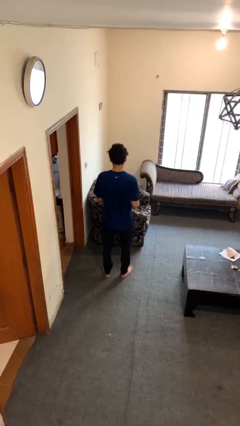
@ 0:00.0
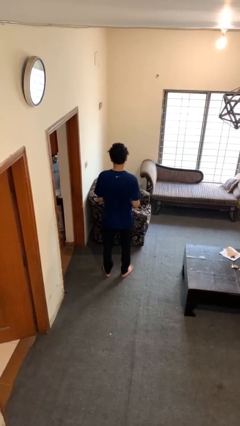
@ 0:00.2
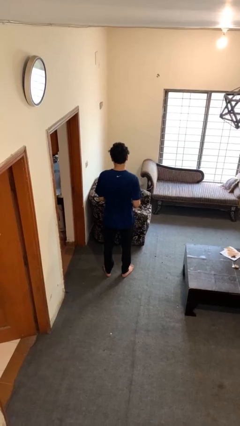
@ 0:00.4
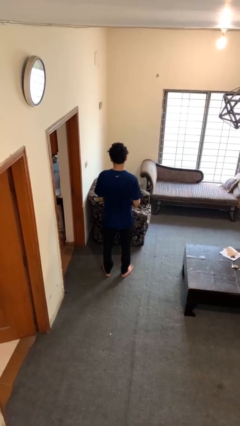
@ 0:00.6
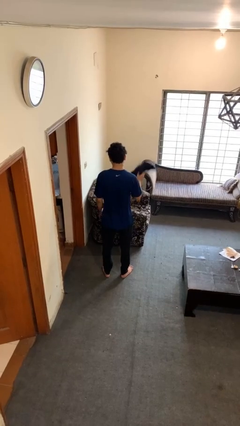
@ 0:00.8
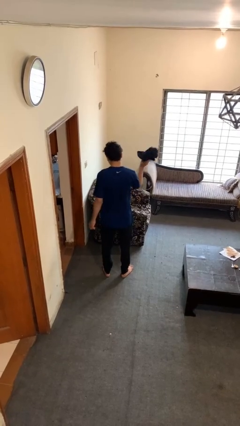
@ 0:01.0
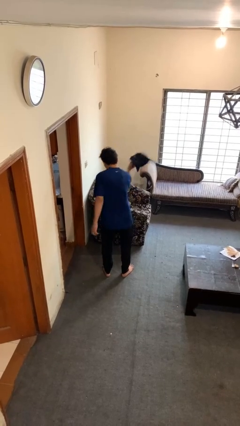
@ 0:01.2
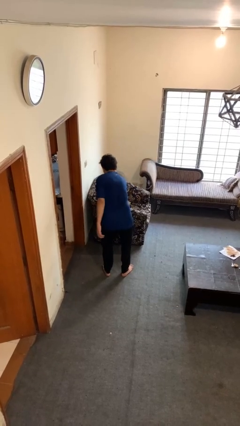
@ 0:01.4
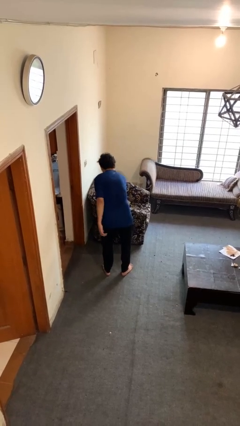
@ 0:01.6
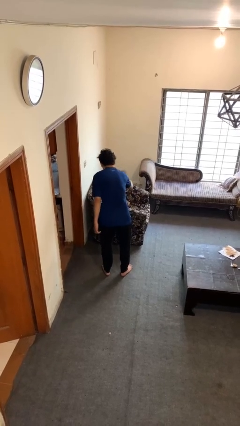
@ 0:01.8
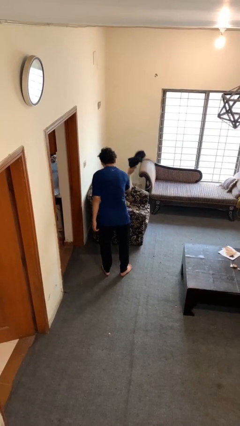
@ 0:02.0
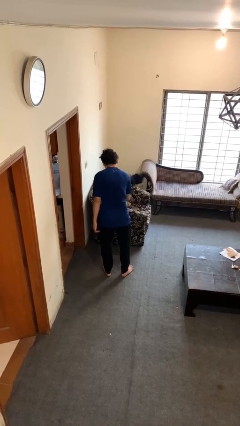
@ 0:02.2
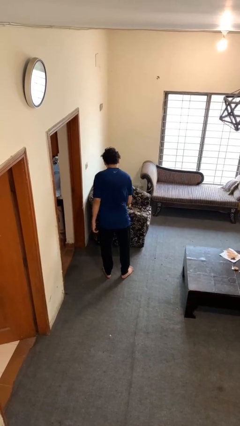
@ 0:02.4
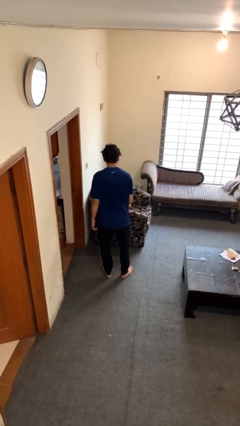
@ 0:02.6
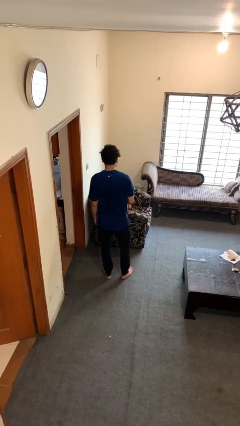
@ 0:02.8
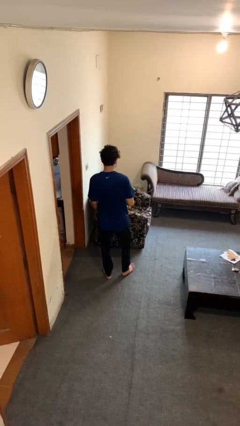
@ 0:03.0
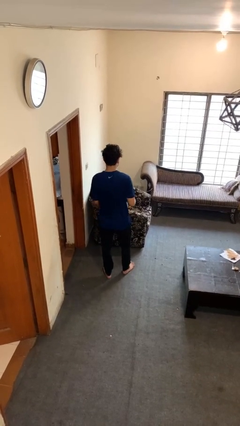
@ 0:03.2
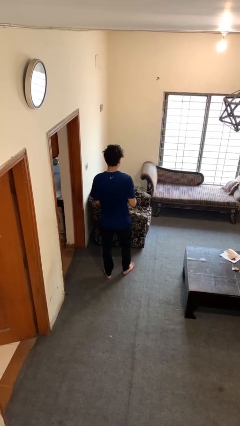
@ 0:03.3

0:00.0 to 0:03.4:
person dusts furniture

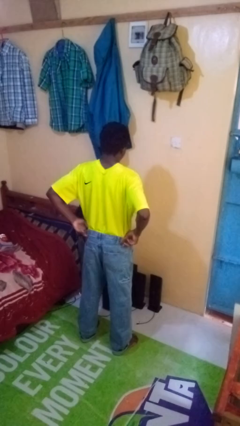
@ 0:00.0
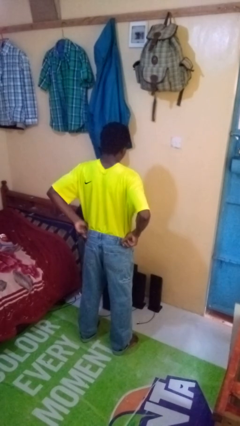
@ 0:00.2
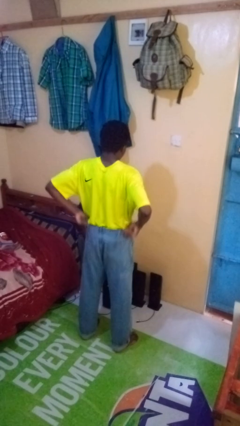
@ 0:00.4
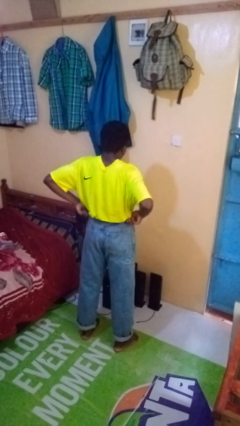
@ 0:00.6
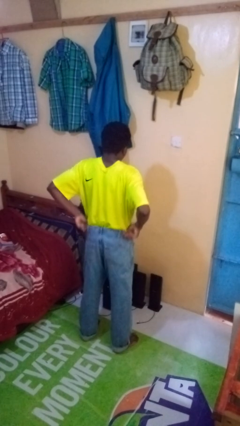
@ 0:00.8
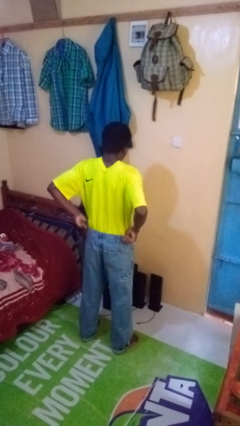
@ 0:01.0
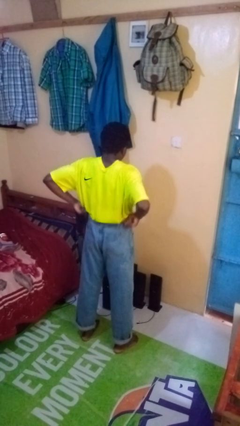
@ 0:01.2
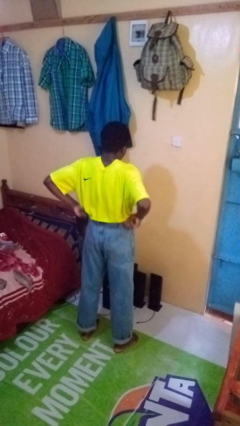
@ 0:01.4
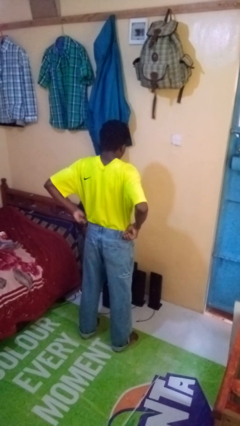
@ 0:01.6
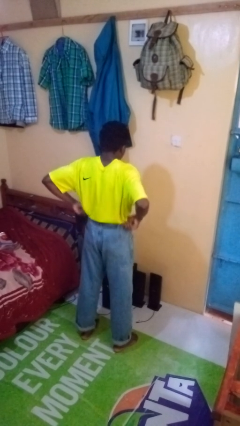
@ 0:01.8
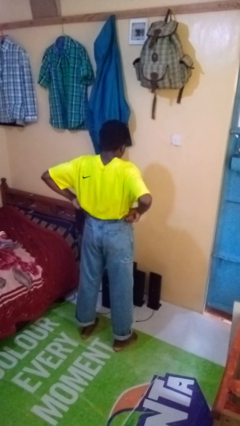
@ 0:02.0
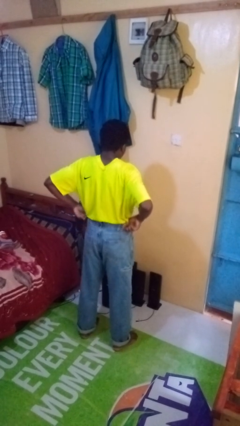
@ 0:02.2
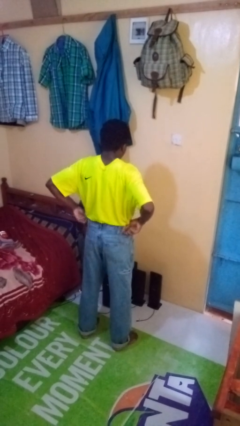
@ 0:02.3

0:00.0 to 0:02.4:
person hikes up pants

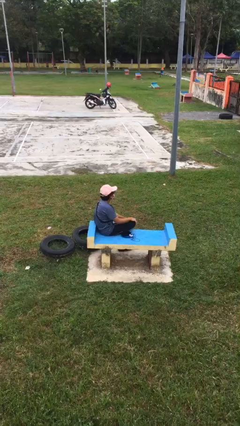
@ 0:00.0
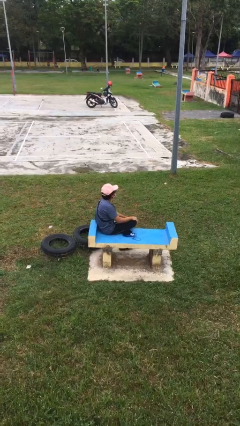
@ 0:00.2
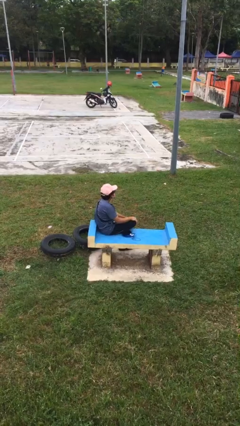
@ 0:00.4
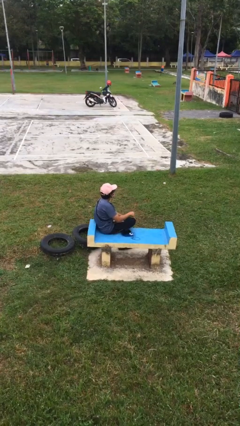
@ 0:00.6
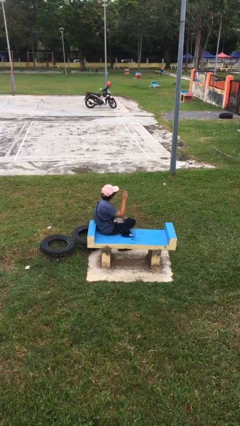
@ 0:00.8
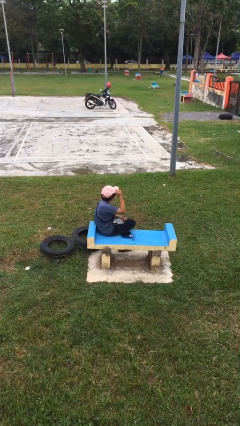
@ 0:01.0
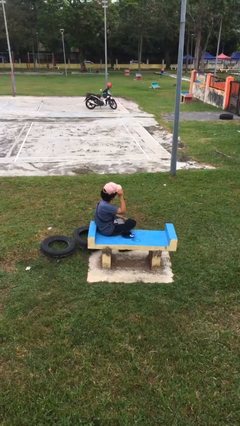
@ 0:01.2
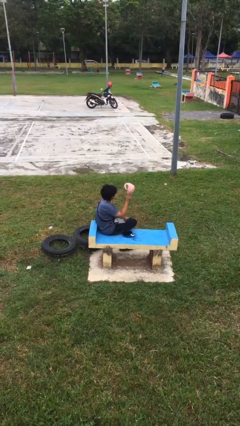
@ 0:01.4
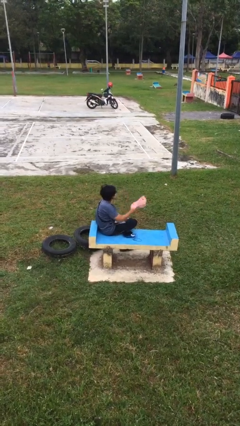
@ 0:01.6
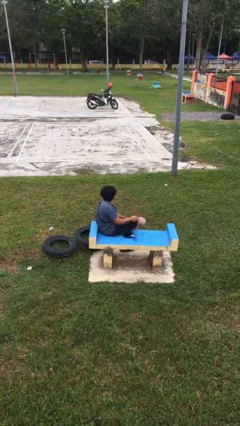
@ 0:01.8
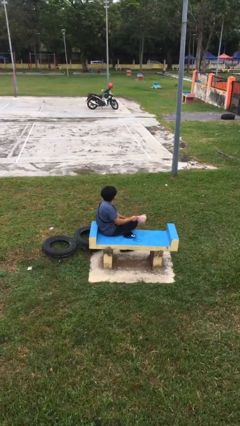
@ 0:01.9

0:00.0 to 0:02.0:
person takes off hat

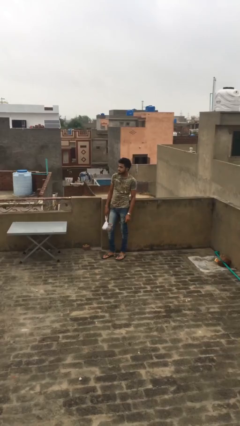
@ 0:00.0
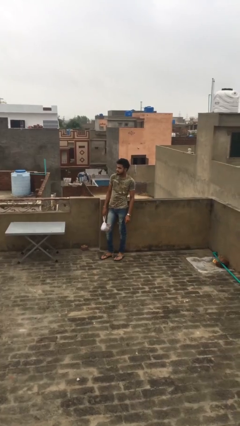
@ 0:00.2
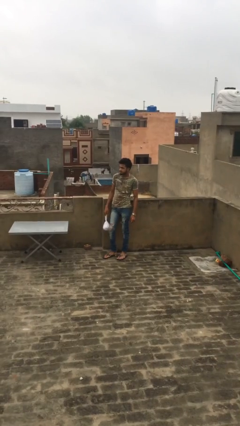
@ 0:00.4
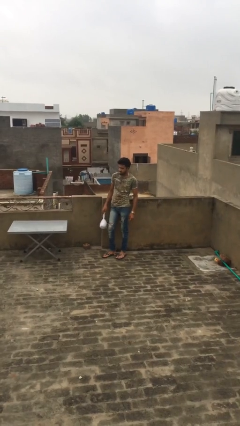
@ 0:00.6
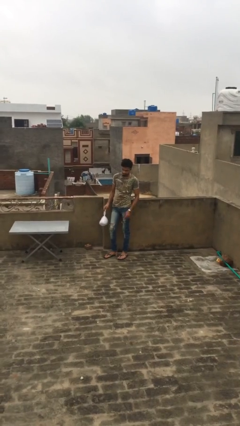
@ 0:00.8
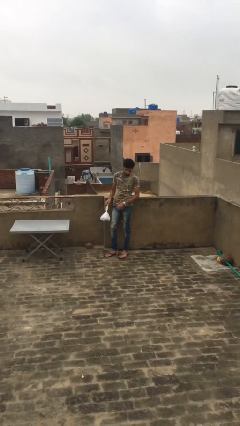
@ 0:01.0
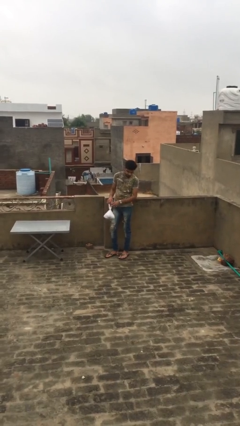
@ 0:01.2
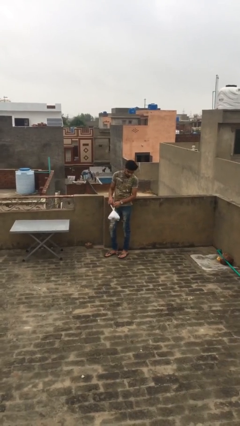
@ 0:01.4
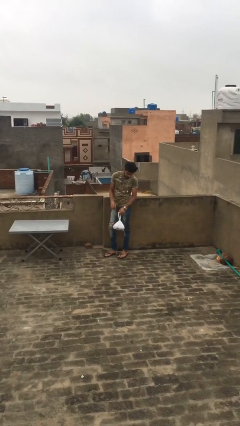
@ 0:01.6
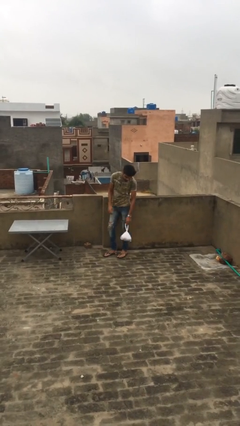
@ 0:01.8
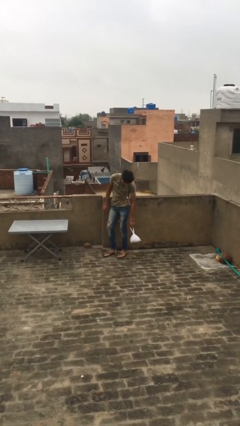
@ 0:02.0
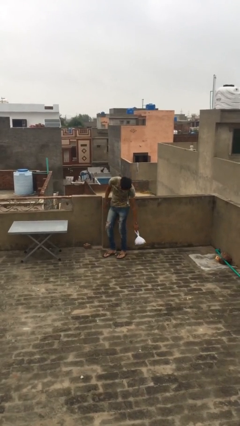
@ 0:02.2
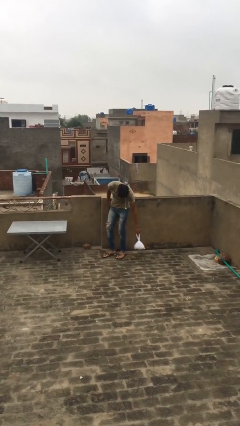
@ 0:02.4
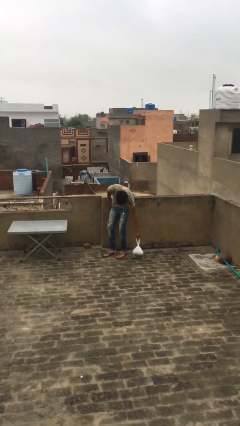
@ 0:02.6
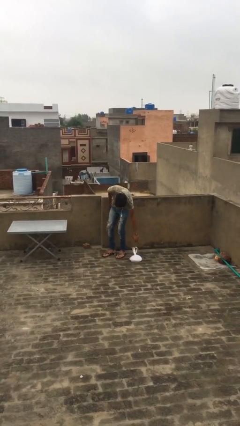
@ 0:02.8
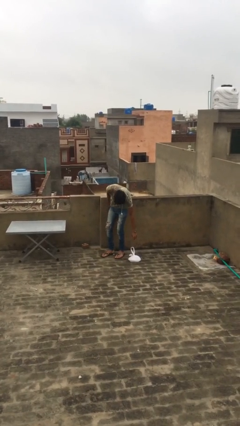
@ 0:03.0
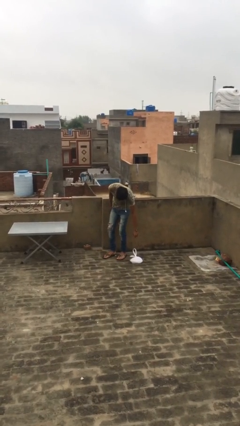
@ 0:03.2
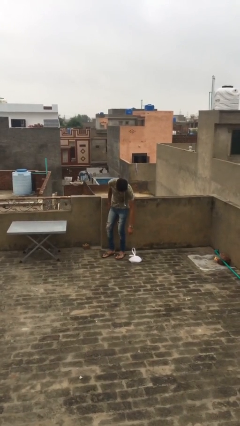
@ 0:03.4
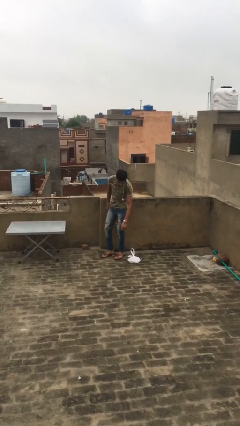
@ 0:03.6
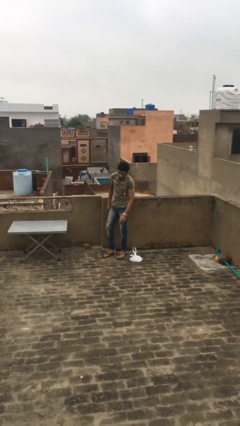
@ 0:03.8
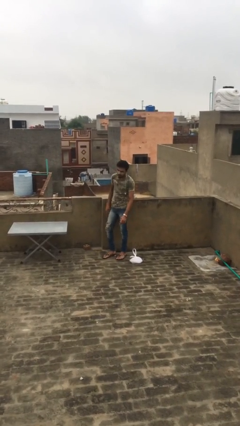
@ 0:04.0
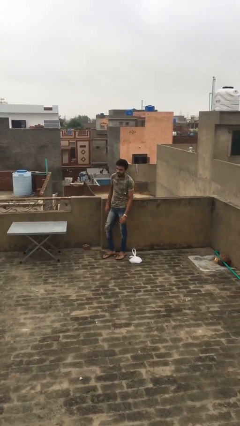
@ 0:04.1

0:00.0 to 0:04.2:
person puts down object on floor

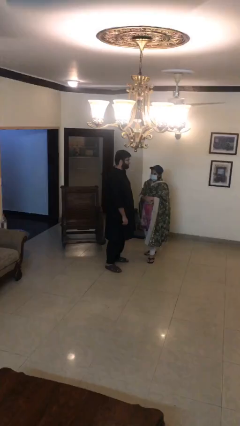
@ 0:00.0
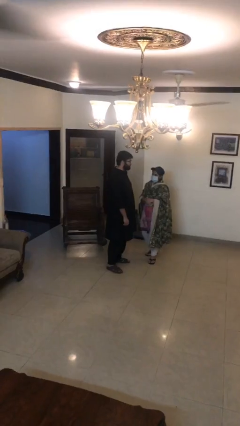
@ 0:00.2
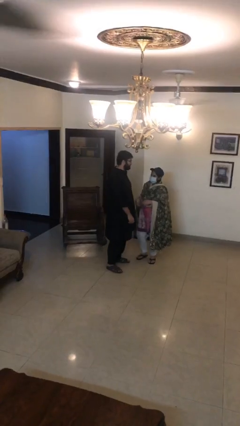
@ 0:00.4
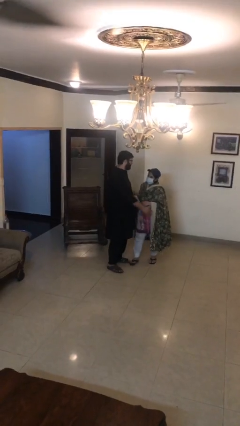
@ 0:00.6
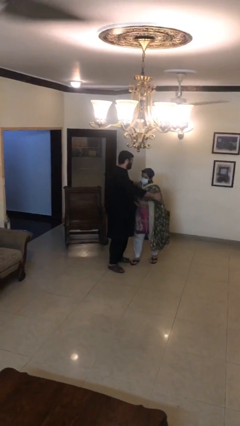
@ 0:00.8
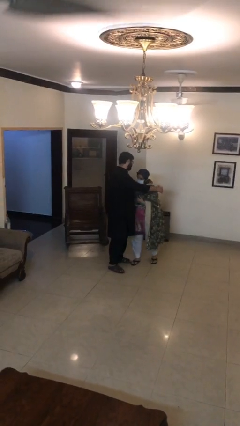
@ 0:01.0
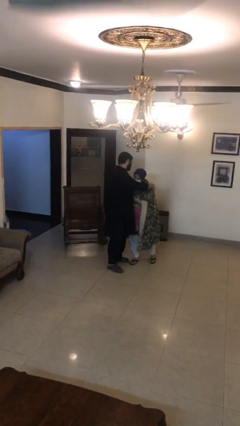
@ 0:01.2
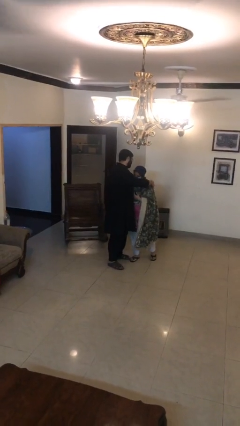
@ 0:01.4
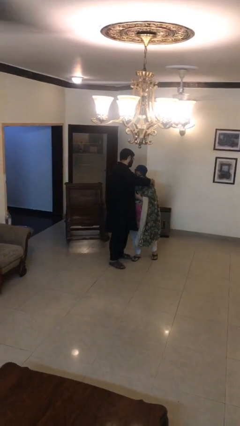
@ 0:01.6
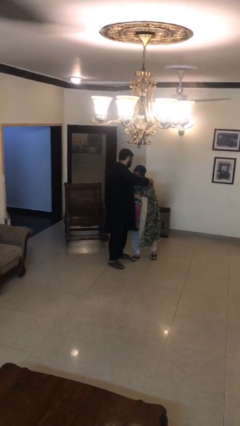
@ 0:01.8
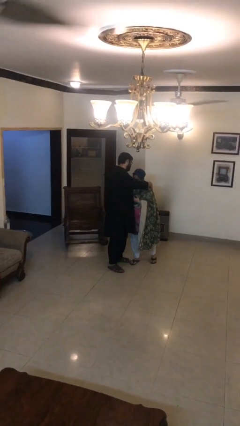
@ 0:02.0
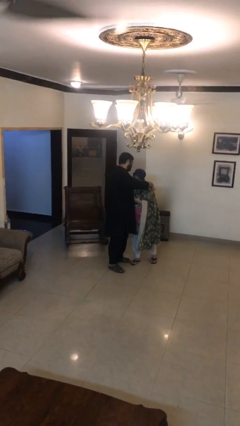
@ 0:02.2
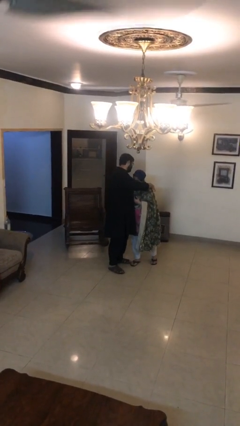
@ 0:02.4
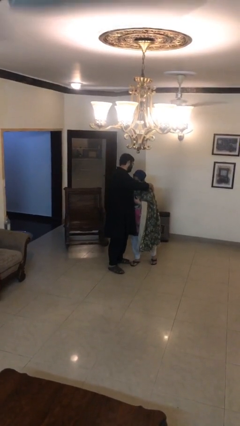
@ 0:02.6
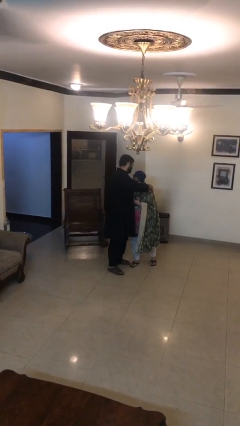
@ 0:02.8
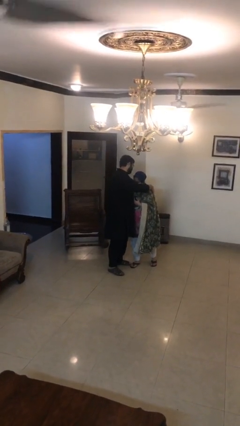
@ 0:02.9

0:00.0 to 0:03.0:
person embraces person

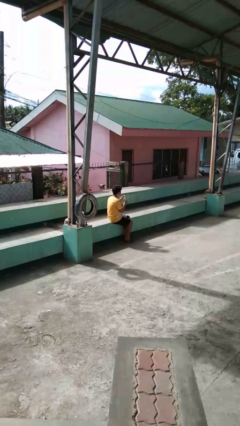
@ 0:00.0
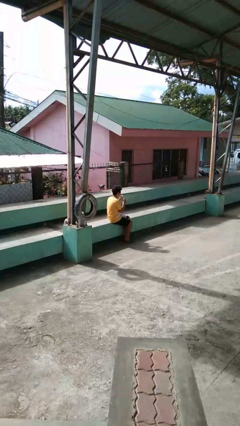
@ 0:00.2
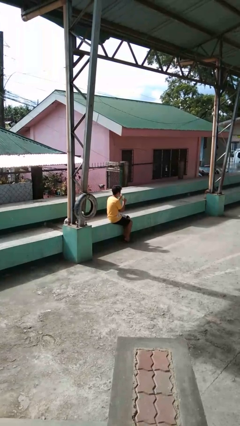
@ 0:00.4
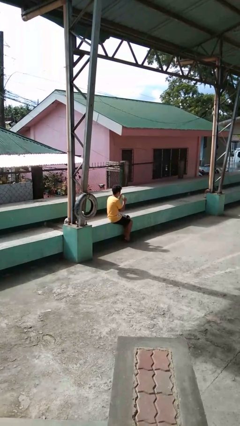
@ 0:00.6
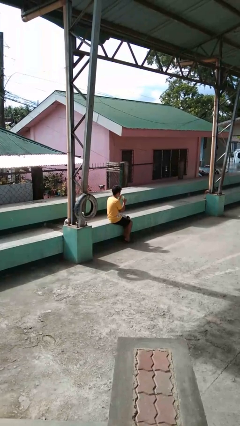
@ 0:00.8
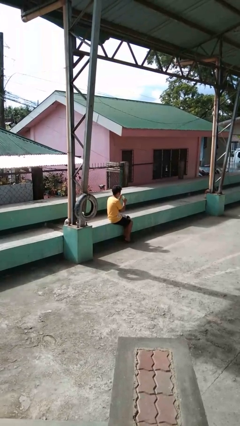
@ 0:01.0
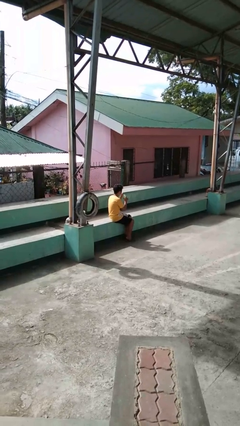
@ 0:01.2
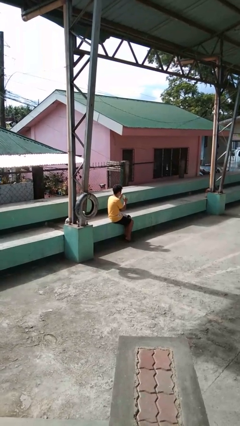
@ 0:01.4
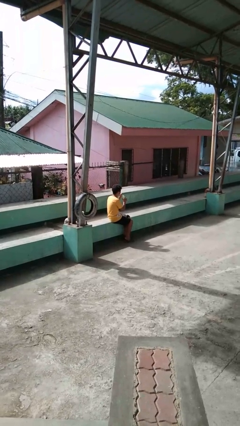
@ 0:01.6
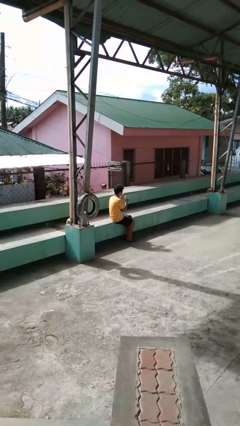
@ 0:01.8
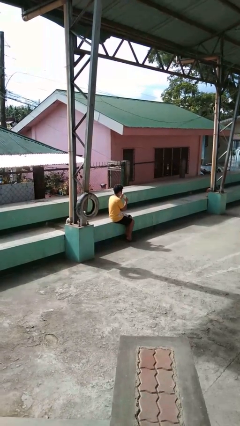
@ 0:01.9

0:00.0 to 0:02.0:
person drinks from straw

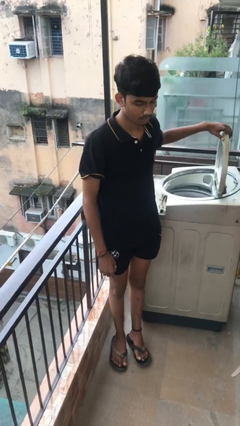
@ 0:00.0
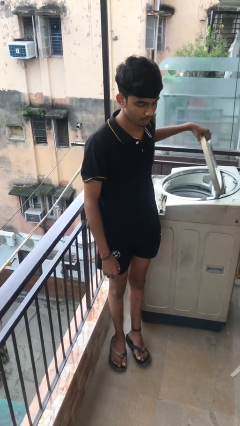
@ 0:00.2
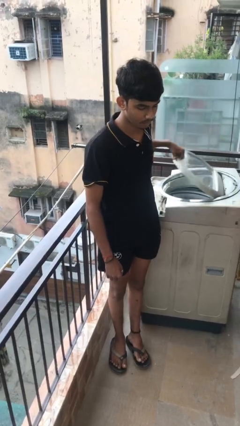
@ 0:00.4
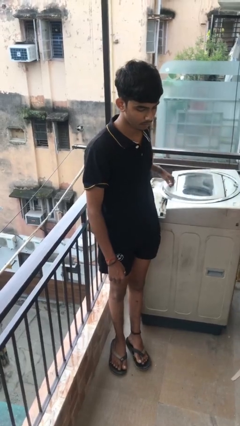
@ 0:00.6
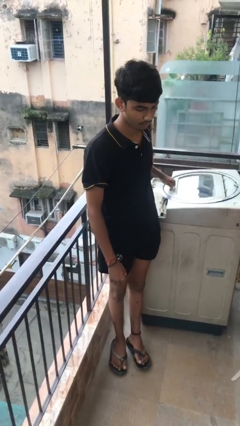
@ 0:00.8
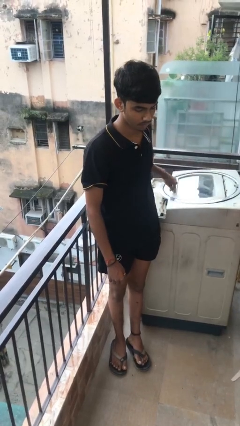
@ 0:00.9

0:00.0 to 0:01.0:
person closes clothes washer
